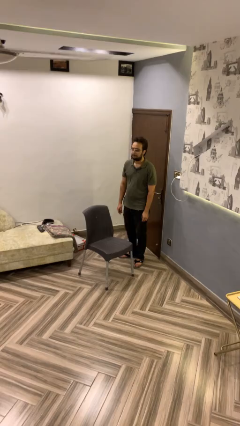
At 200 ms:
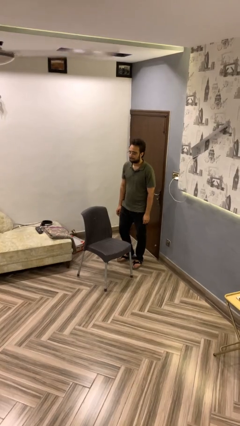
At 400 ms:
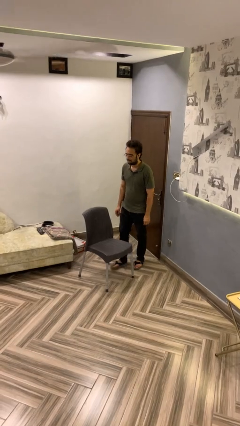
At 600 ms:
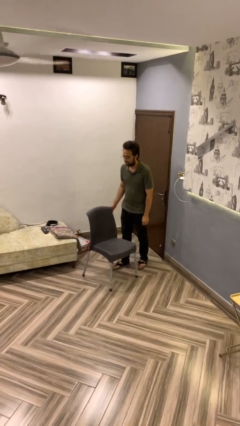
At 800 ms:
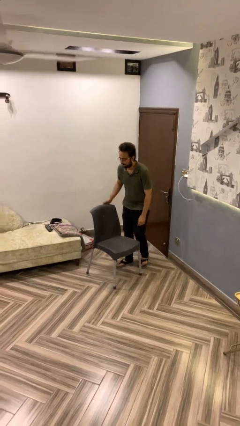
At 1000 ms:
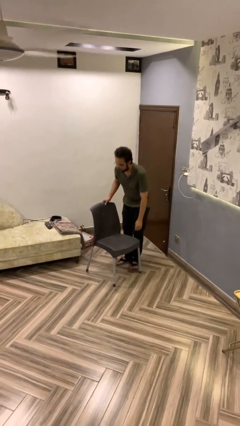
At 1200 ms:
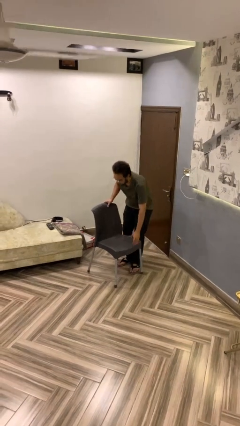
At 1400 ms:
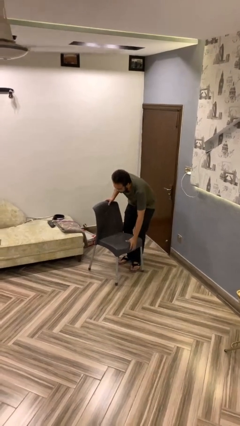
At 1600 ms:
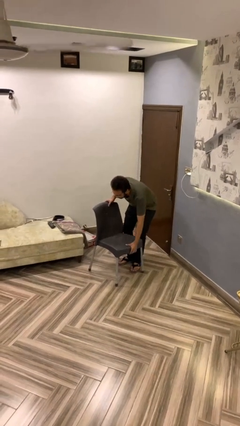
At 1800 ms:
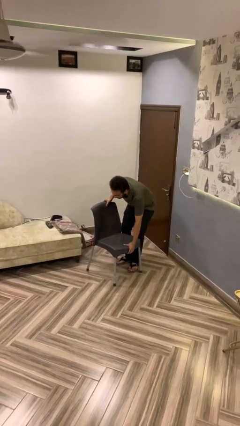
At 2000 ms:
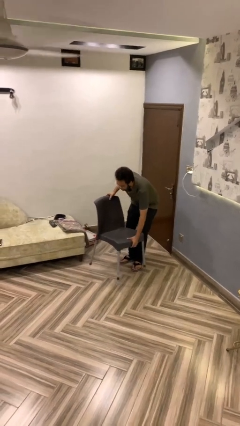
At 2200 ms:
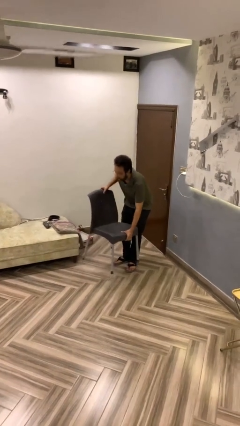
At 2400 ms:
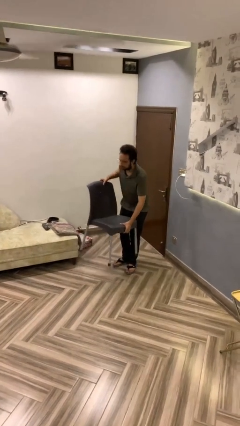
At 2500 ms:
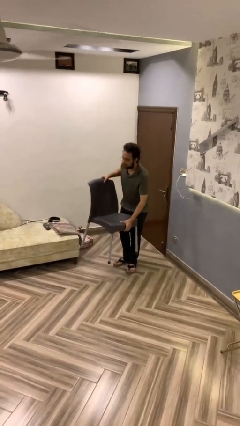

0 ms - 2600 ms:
person picks up object from floor

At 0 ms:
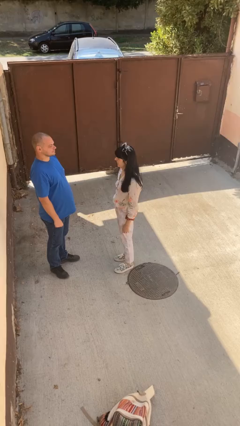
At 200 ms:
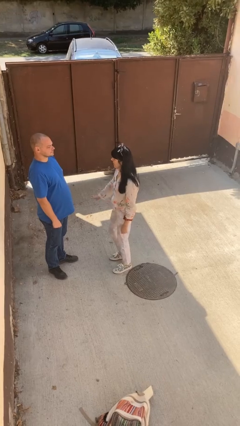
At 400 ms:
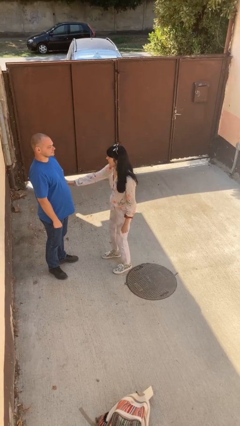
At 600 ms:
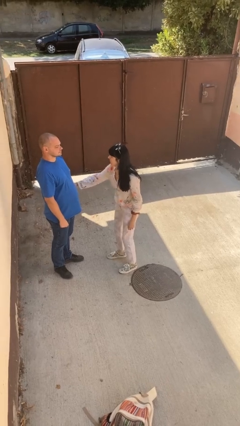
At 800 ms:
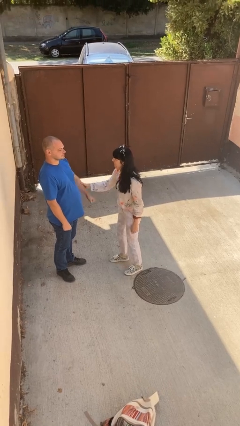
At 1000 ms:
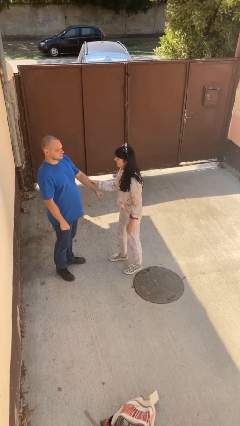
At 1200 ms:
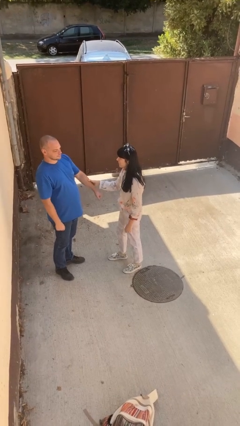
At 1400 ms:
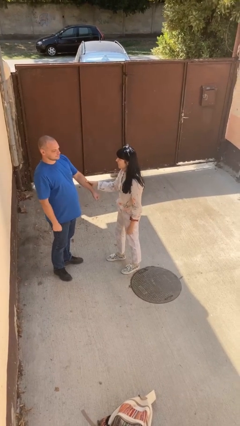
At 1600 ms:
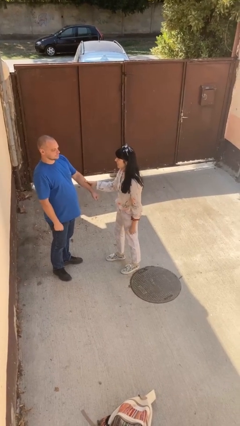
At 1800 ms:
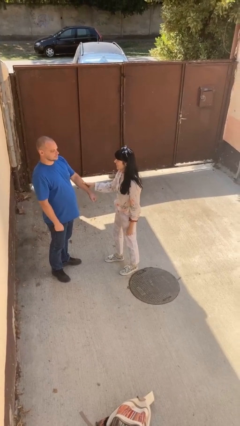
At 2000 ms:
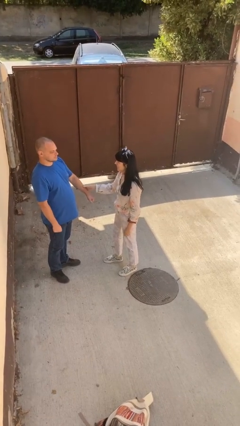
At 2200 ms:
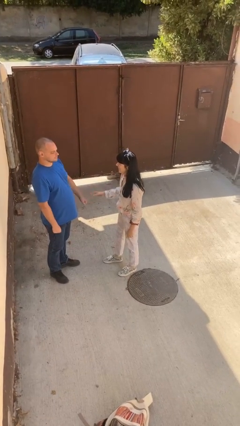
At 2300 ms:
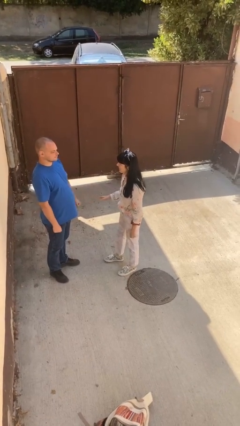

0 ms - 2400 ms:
person grabs person by forearm

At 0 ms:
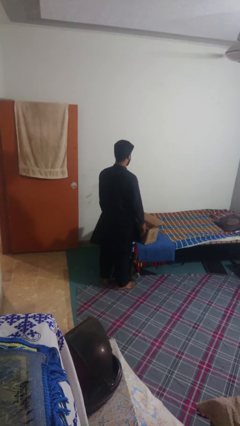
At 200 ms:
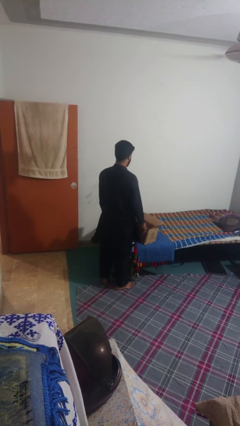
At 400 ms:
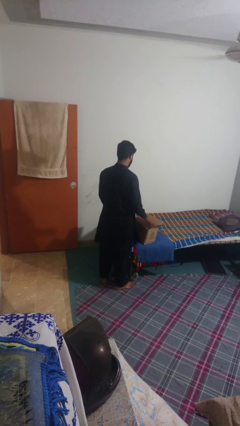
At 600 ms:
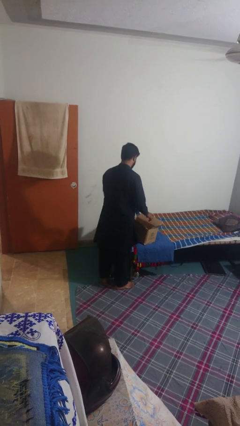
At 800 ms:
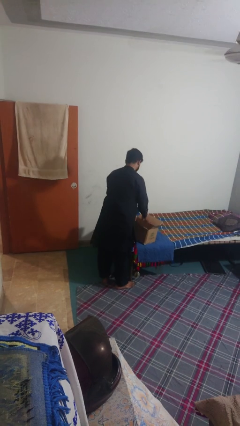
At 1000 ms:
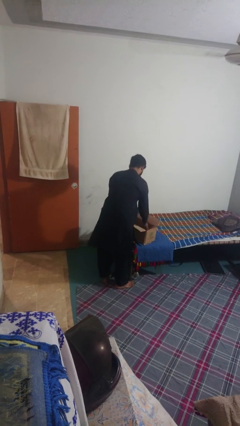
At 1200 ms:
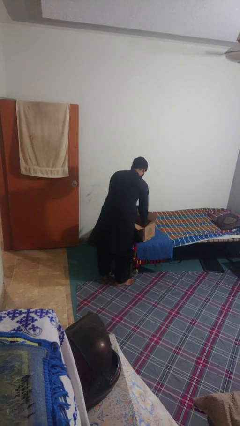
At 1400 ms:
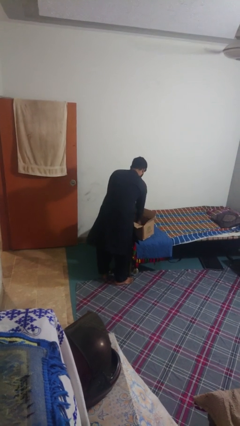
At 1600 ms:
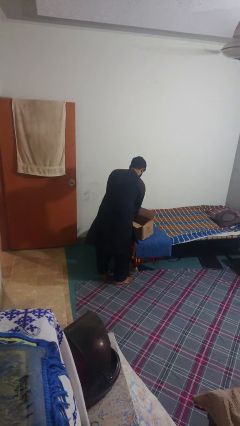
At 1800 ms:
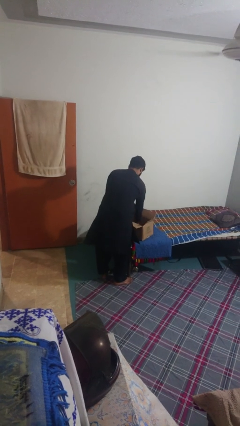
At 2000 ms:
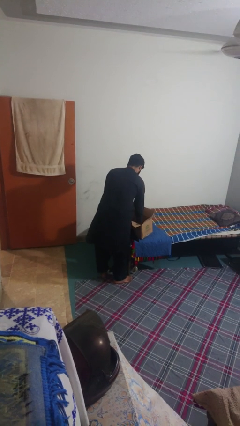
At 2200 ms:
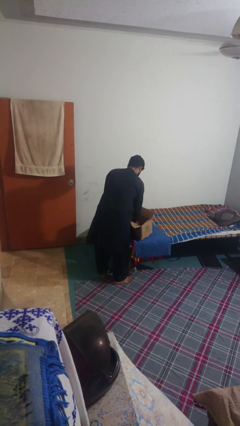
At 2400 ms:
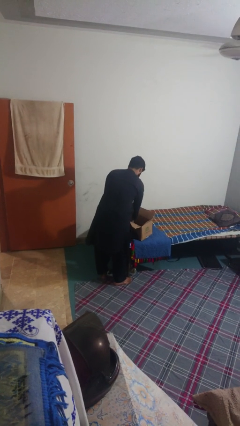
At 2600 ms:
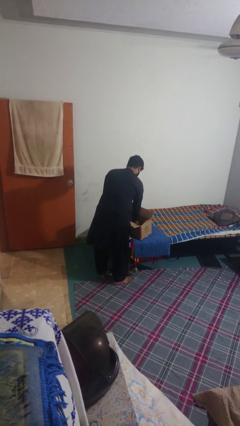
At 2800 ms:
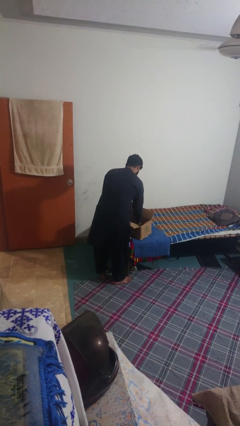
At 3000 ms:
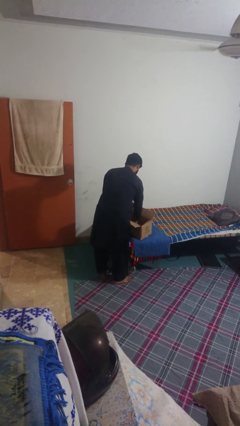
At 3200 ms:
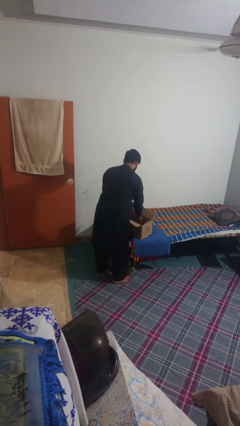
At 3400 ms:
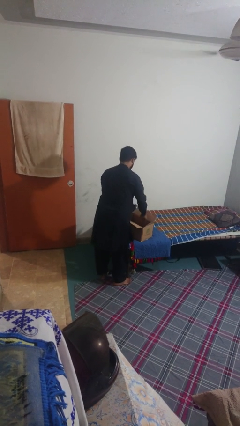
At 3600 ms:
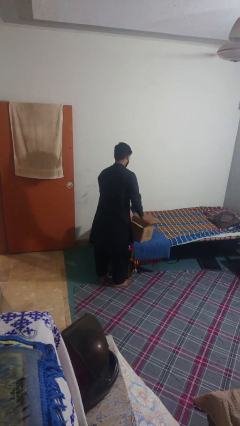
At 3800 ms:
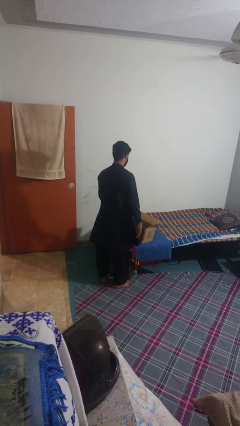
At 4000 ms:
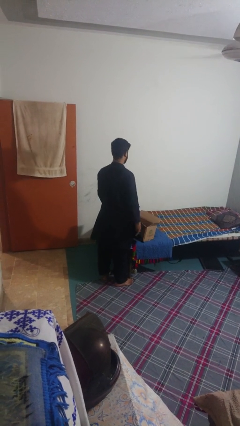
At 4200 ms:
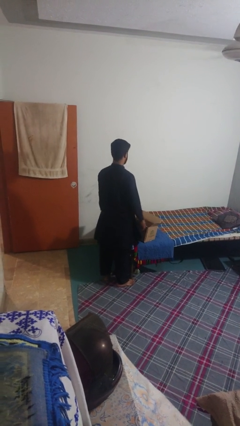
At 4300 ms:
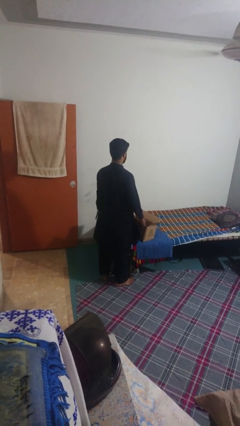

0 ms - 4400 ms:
person searches in box

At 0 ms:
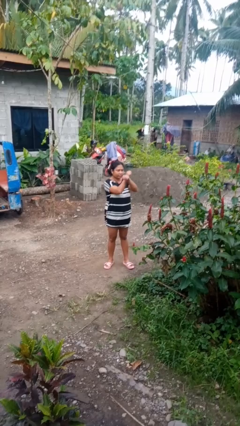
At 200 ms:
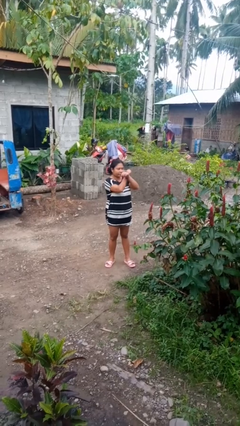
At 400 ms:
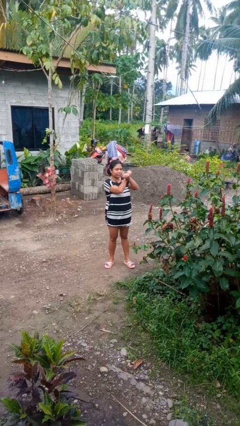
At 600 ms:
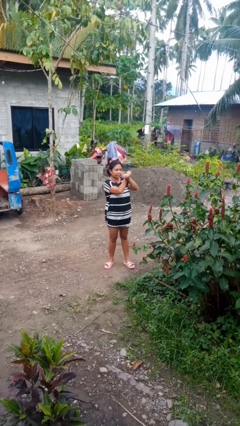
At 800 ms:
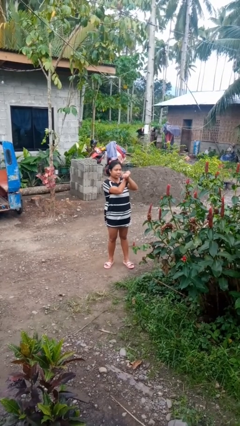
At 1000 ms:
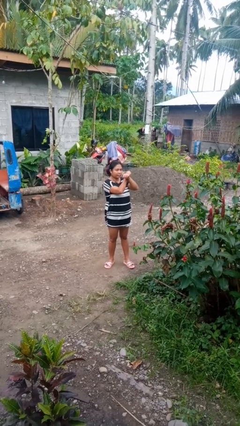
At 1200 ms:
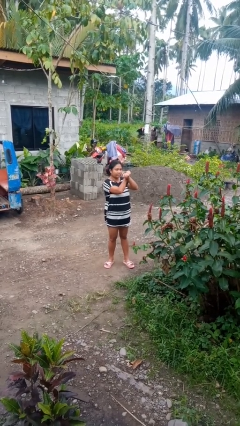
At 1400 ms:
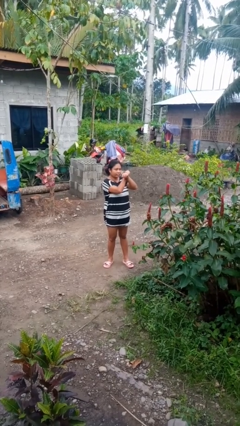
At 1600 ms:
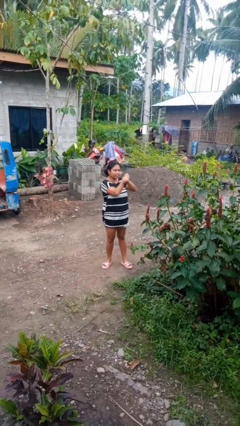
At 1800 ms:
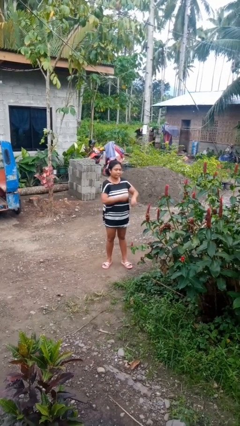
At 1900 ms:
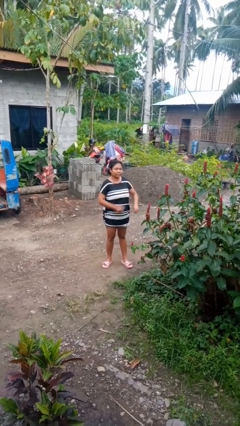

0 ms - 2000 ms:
person gestures arms x

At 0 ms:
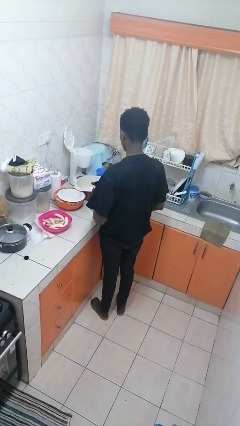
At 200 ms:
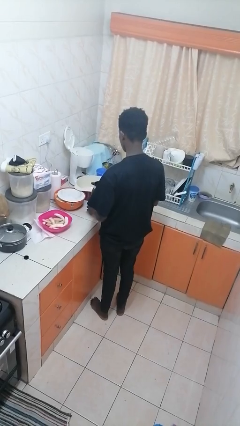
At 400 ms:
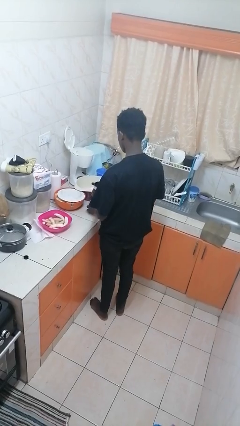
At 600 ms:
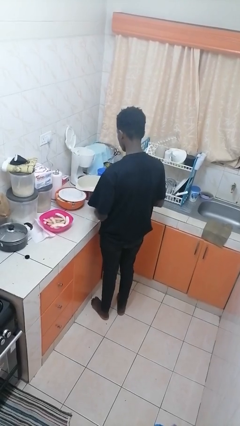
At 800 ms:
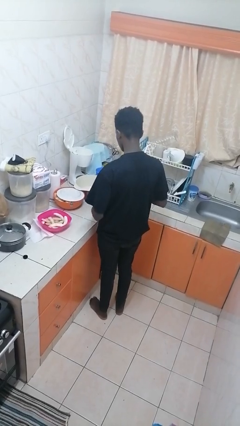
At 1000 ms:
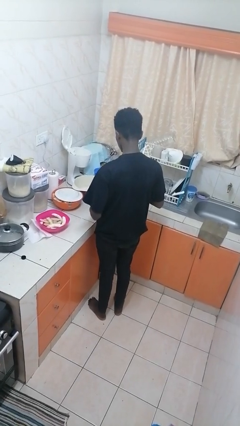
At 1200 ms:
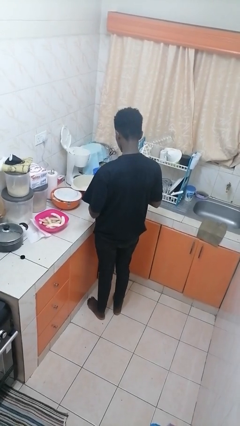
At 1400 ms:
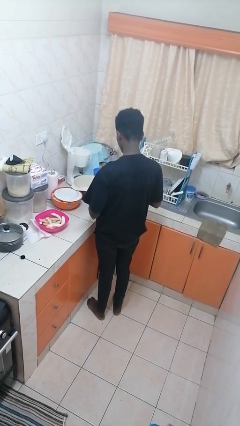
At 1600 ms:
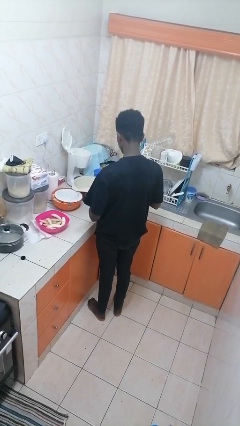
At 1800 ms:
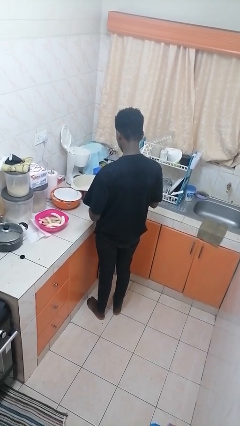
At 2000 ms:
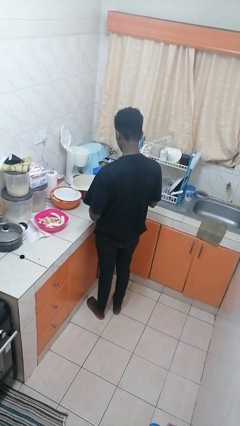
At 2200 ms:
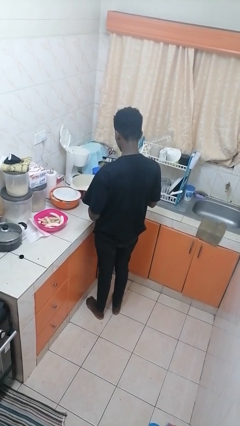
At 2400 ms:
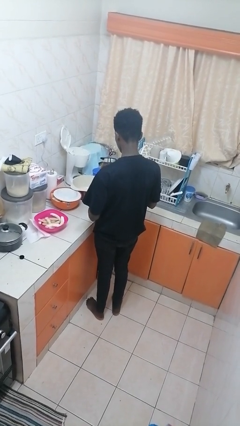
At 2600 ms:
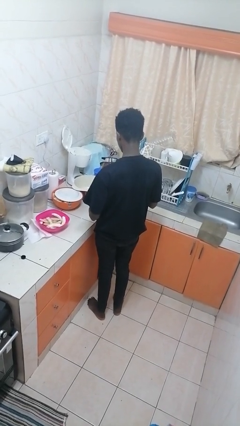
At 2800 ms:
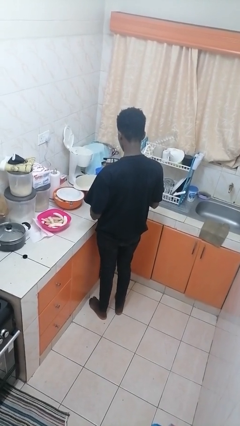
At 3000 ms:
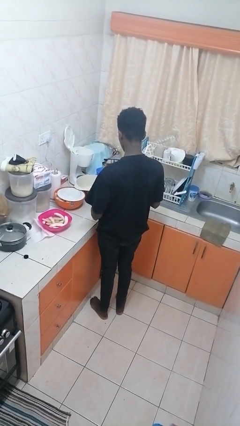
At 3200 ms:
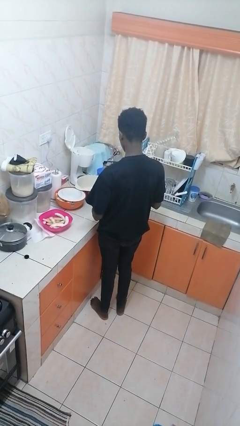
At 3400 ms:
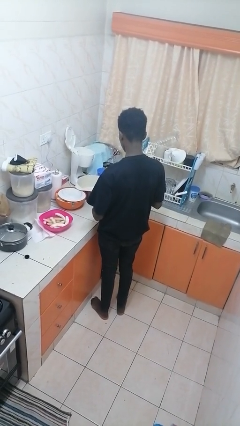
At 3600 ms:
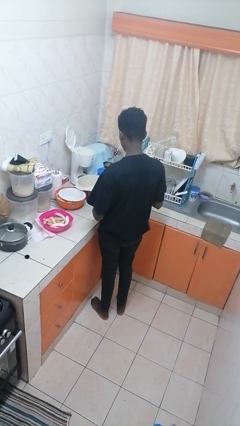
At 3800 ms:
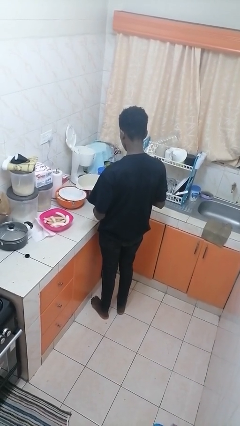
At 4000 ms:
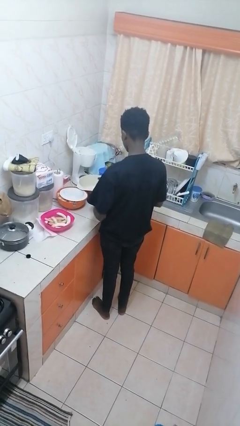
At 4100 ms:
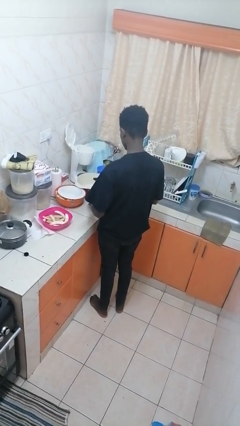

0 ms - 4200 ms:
person picks up object from countertop

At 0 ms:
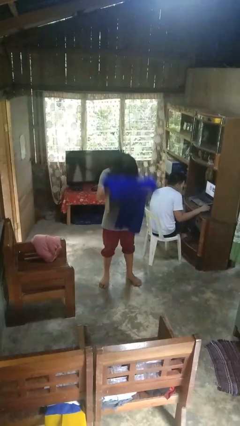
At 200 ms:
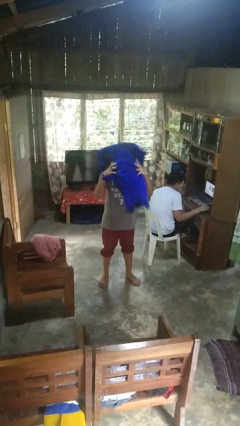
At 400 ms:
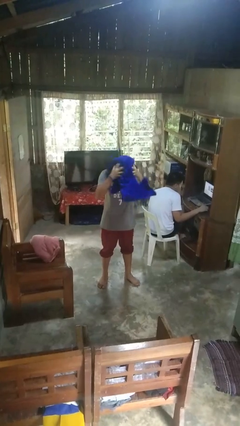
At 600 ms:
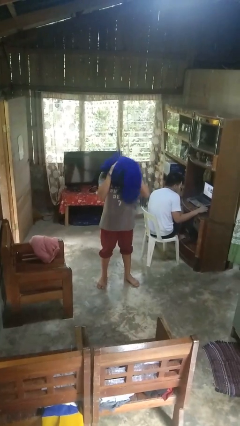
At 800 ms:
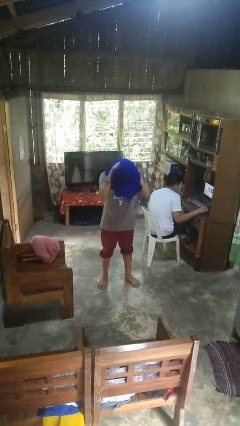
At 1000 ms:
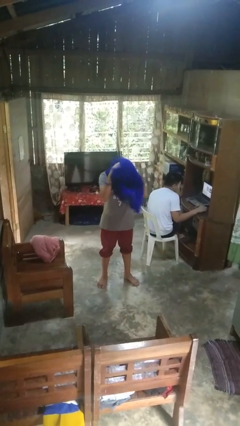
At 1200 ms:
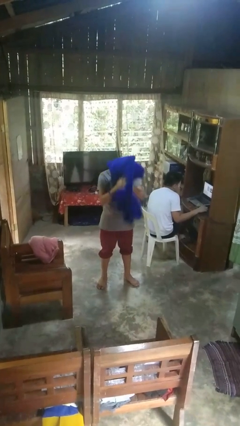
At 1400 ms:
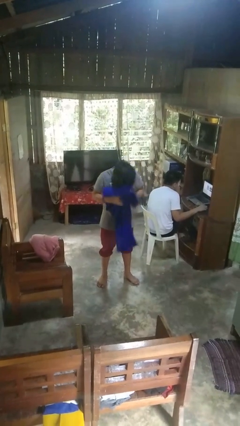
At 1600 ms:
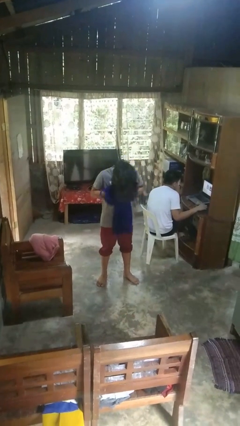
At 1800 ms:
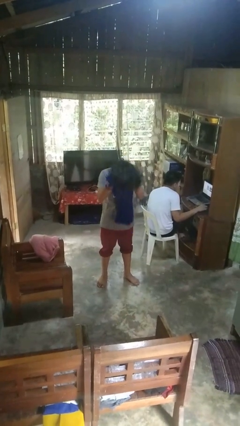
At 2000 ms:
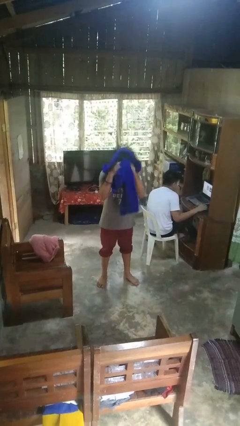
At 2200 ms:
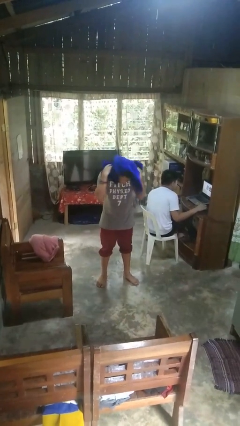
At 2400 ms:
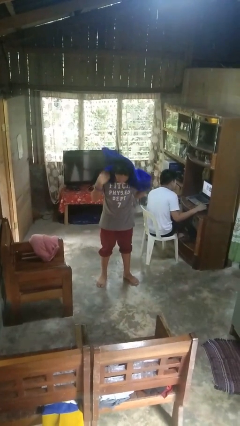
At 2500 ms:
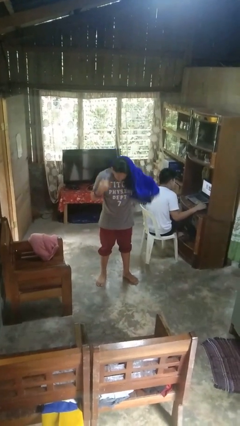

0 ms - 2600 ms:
person dries hair with towel
